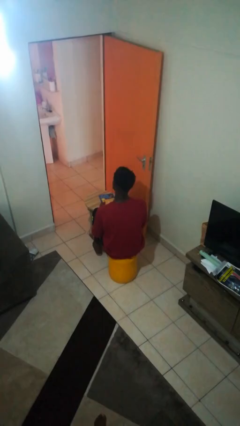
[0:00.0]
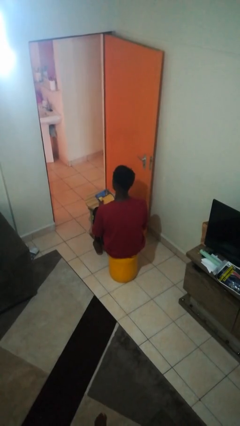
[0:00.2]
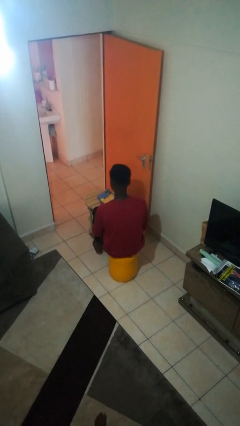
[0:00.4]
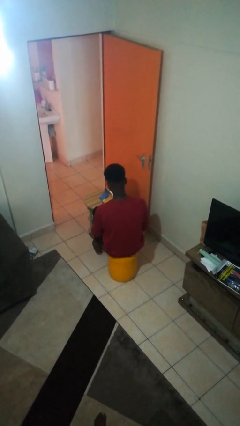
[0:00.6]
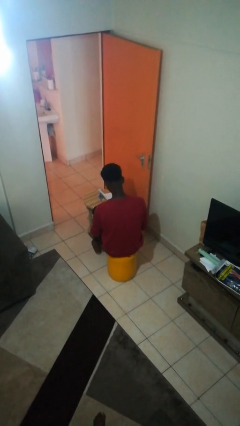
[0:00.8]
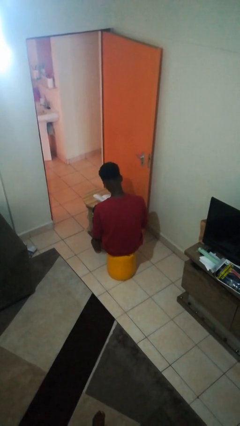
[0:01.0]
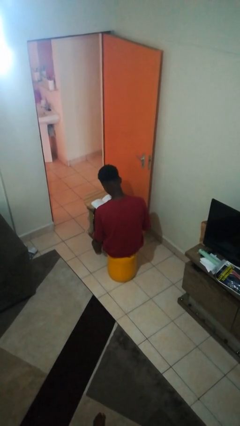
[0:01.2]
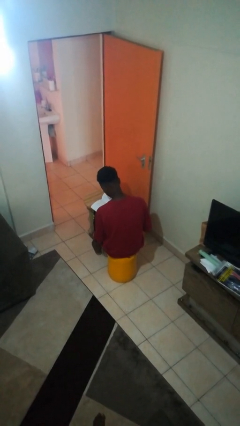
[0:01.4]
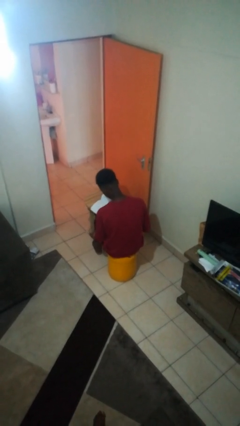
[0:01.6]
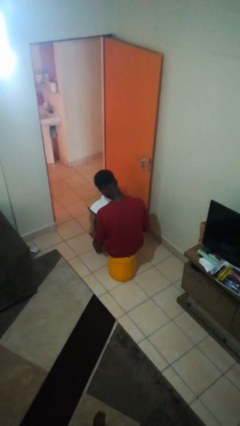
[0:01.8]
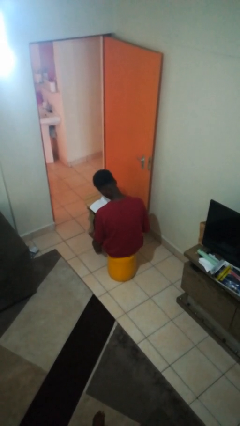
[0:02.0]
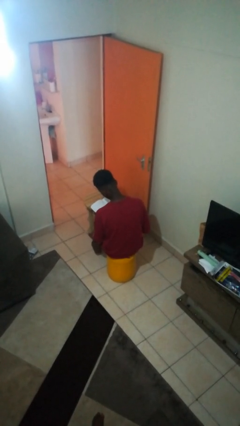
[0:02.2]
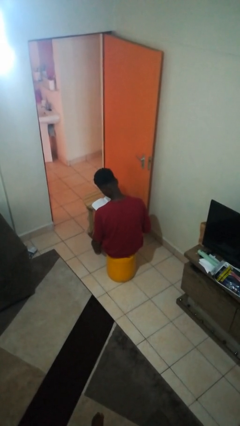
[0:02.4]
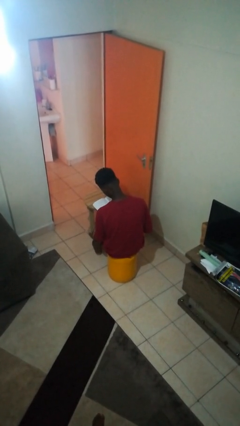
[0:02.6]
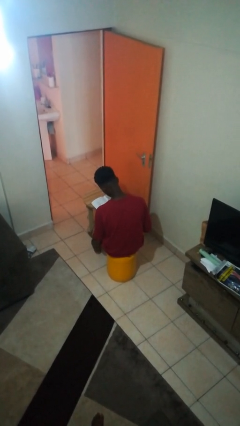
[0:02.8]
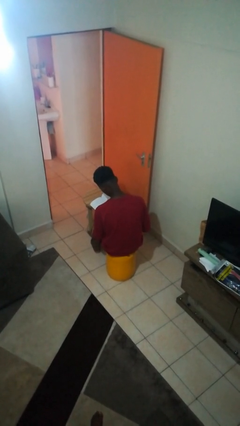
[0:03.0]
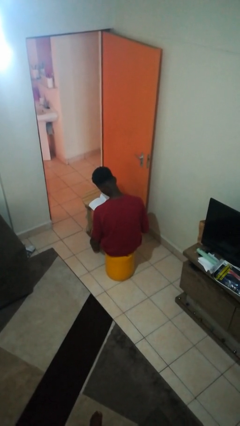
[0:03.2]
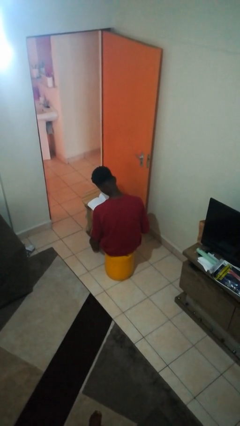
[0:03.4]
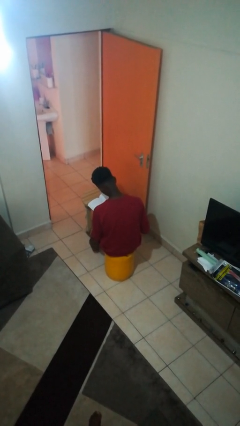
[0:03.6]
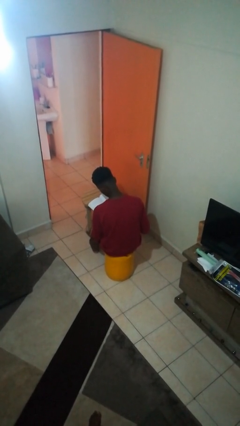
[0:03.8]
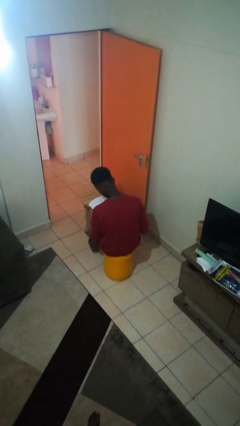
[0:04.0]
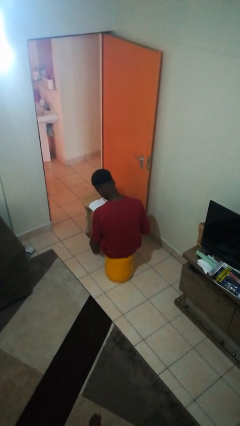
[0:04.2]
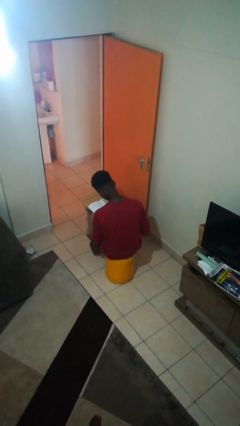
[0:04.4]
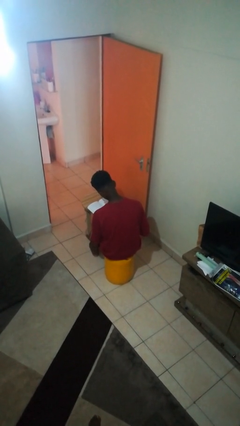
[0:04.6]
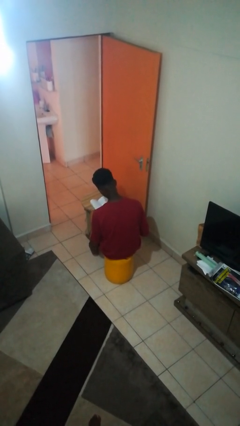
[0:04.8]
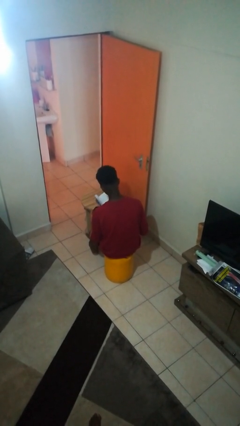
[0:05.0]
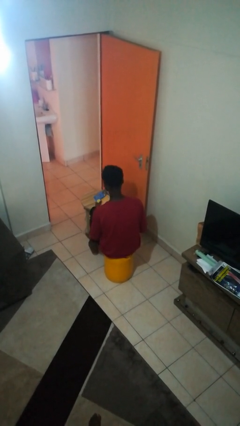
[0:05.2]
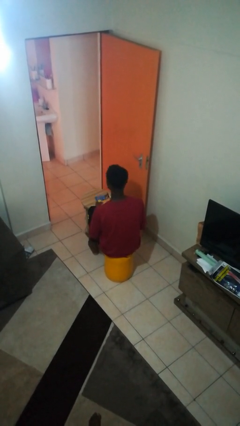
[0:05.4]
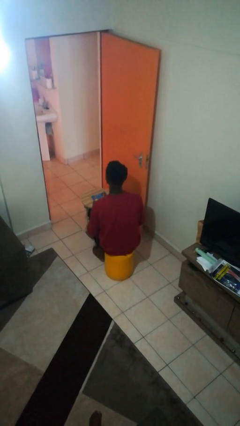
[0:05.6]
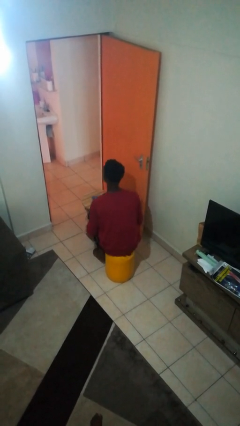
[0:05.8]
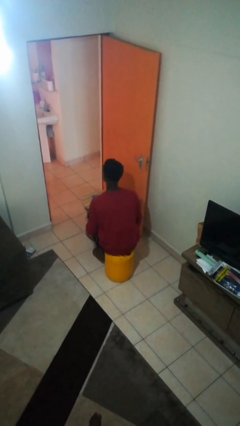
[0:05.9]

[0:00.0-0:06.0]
person reads book

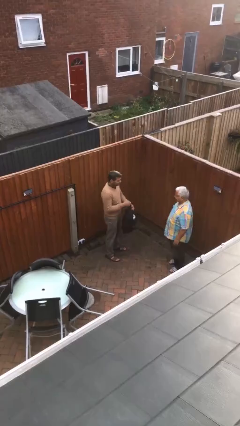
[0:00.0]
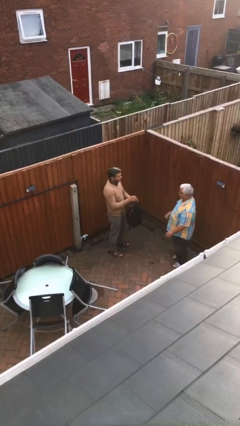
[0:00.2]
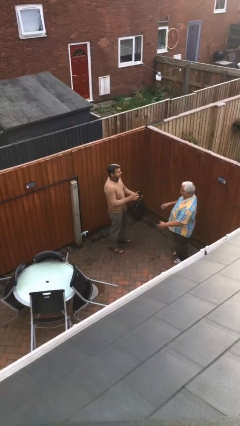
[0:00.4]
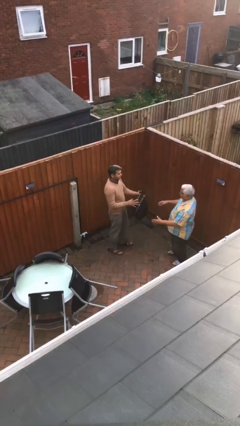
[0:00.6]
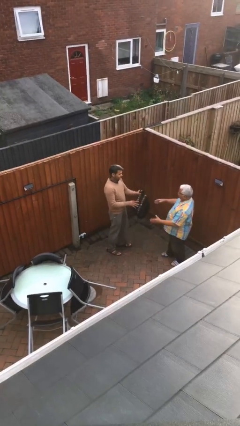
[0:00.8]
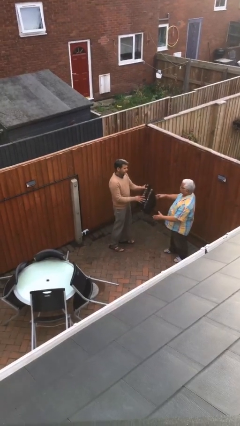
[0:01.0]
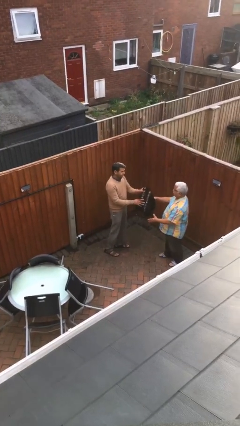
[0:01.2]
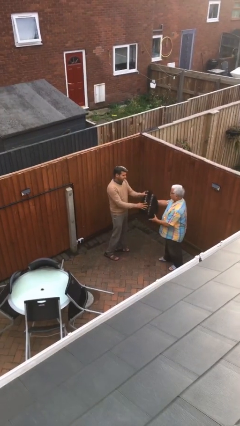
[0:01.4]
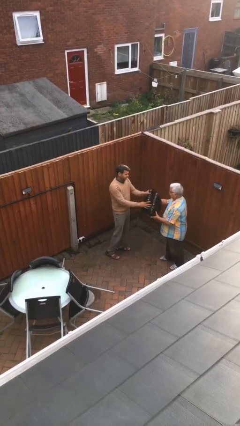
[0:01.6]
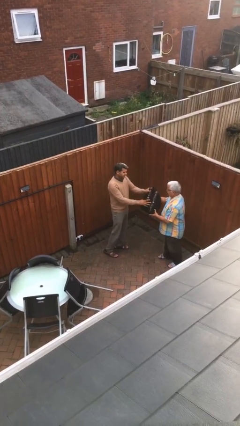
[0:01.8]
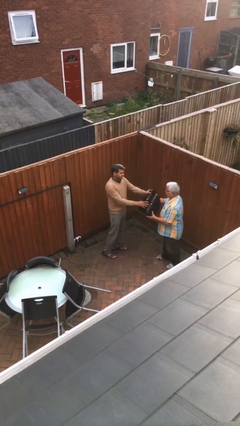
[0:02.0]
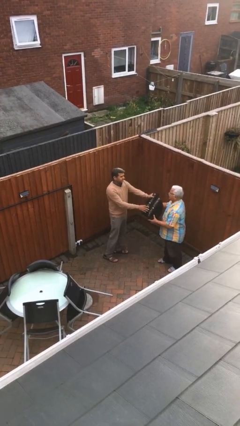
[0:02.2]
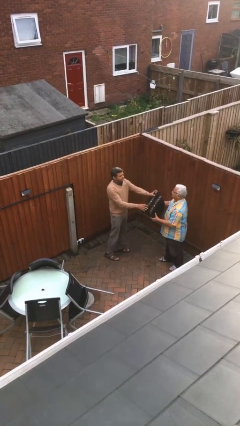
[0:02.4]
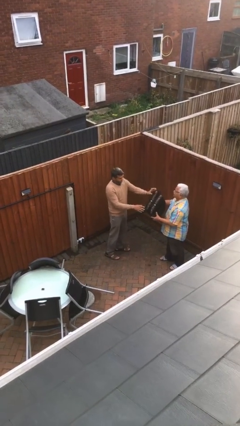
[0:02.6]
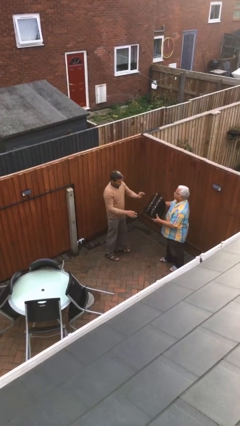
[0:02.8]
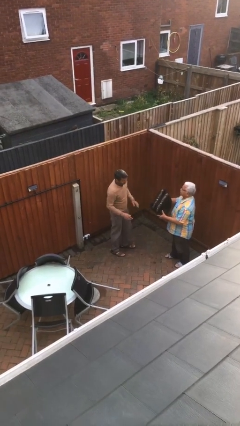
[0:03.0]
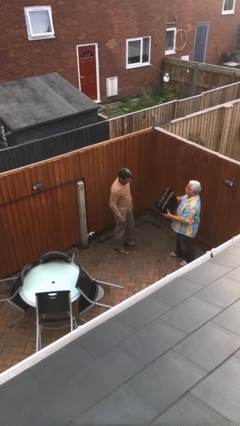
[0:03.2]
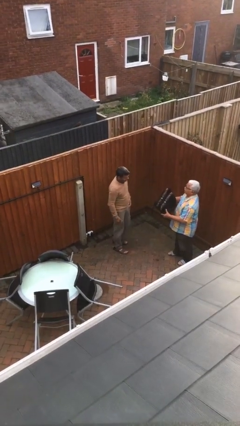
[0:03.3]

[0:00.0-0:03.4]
person transfers object to person

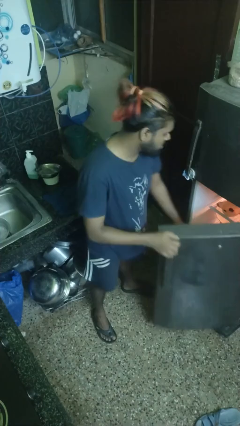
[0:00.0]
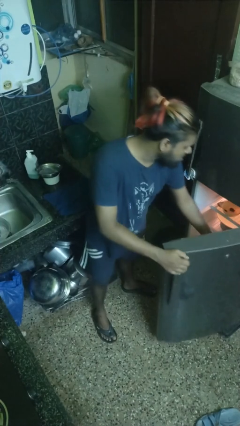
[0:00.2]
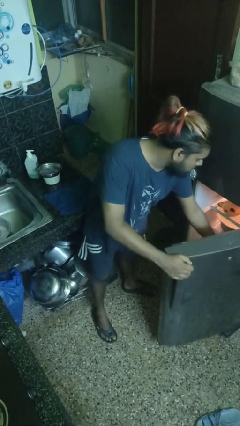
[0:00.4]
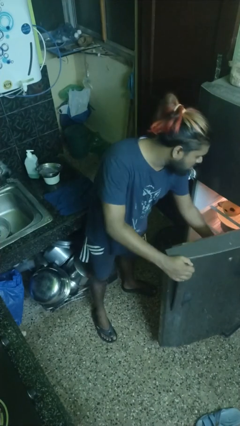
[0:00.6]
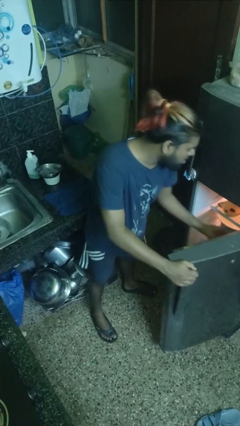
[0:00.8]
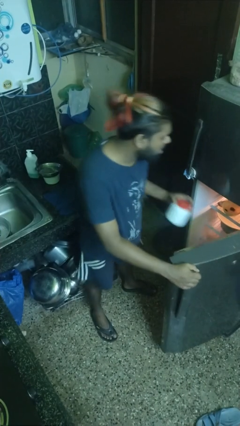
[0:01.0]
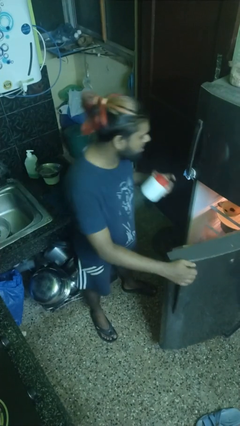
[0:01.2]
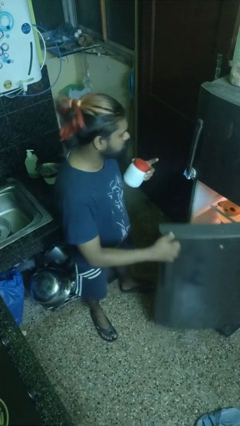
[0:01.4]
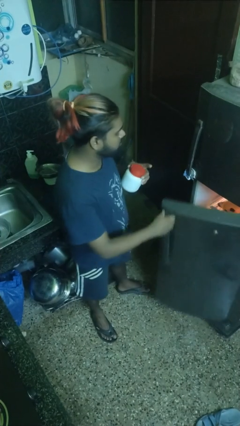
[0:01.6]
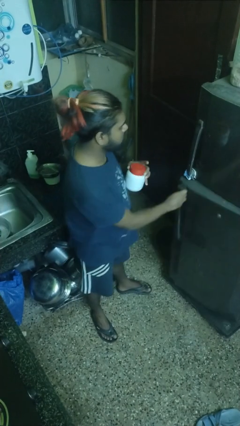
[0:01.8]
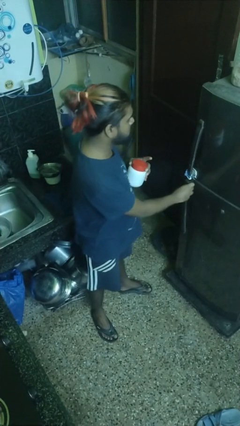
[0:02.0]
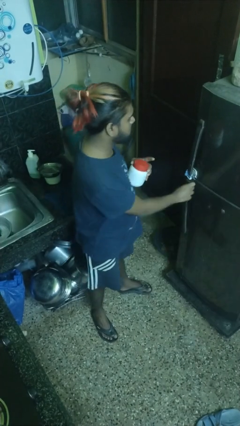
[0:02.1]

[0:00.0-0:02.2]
person takes object from refrigerator

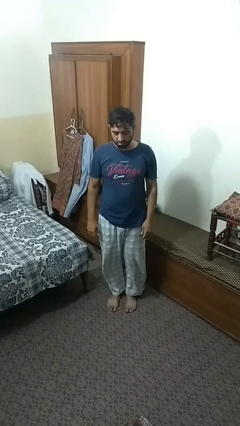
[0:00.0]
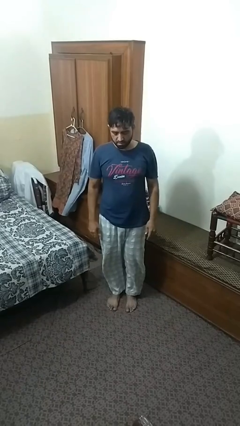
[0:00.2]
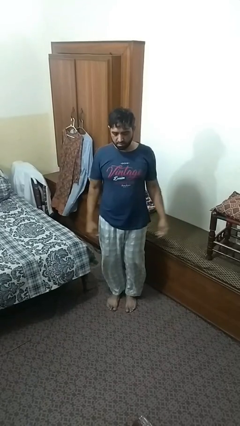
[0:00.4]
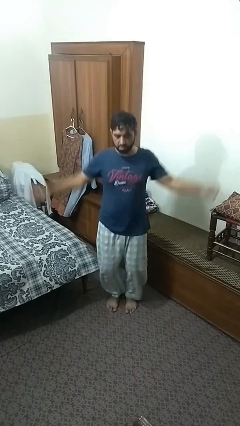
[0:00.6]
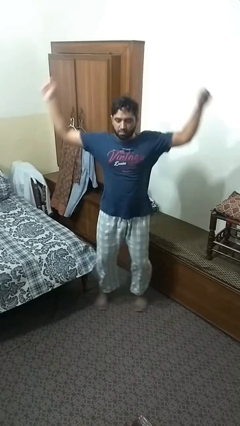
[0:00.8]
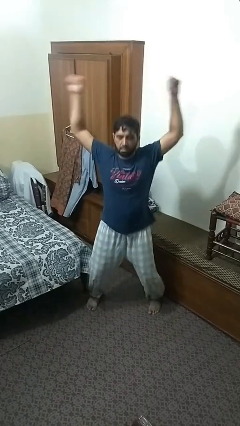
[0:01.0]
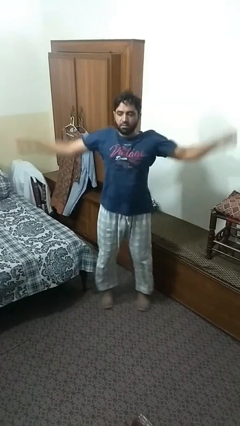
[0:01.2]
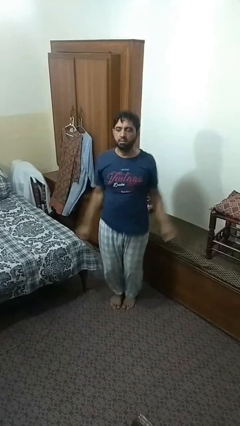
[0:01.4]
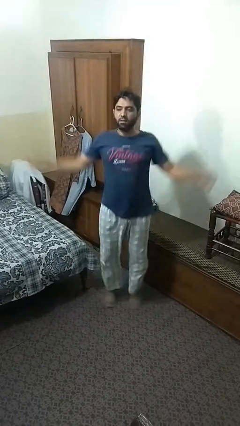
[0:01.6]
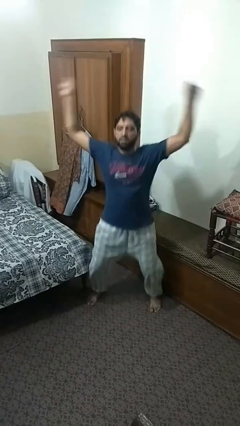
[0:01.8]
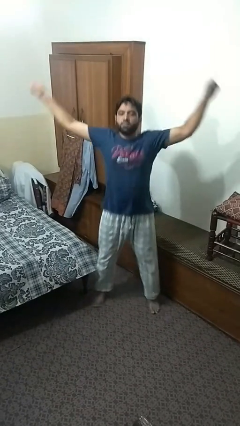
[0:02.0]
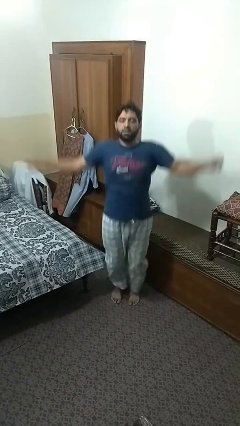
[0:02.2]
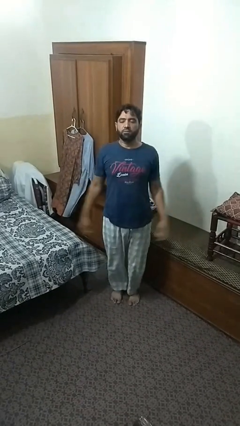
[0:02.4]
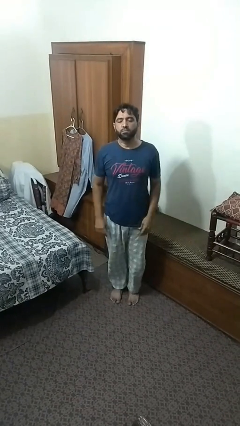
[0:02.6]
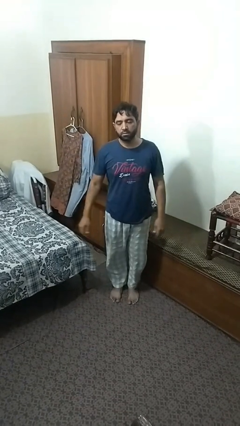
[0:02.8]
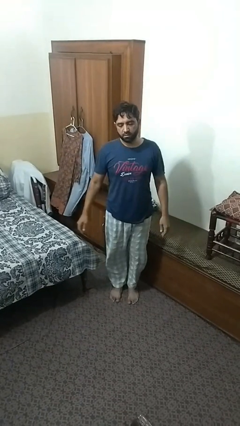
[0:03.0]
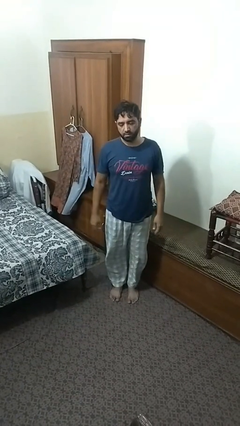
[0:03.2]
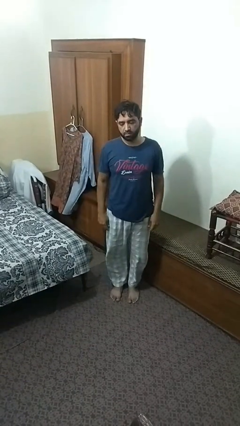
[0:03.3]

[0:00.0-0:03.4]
person exercises with jumping jacks

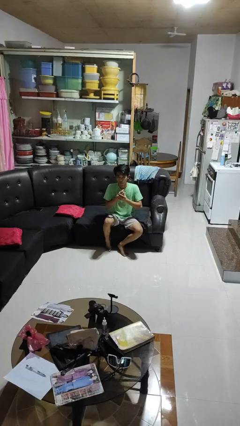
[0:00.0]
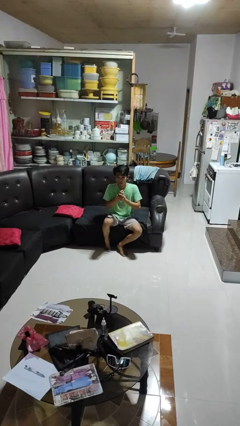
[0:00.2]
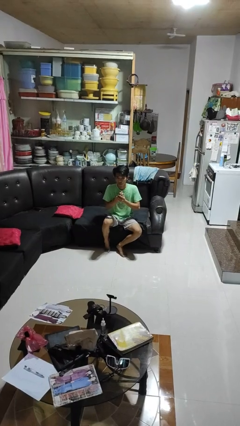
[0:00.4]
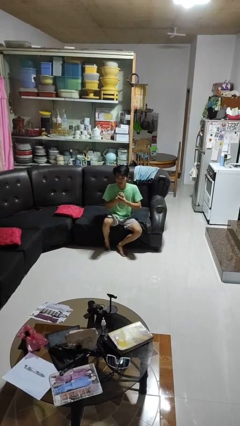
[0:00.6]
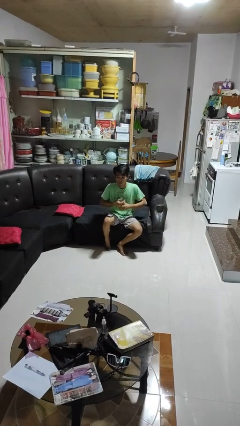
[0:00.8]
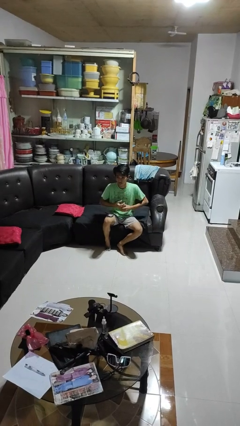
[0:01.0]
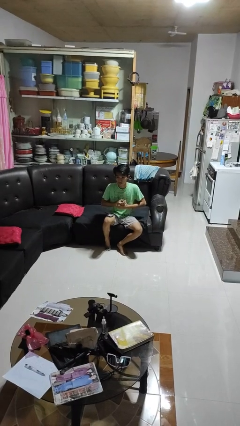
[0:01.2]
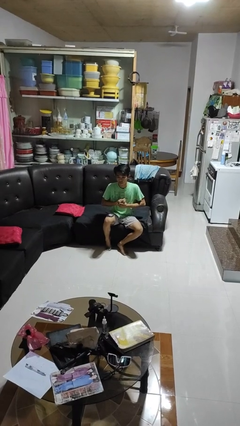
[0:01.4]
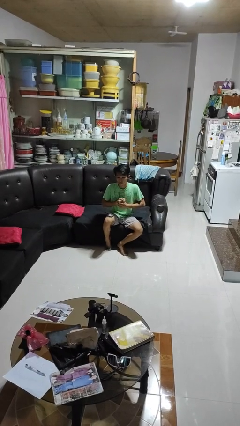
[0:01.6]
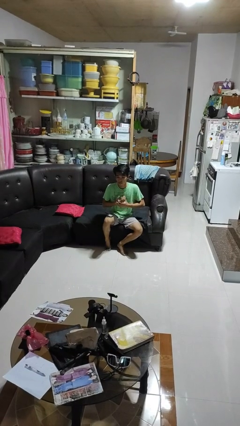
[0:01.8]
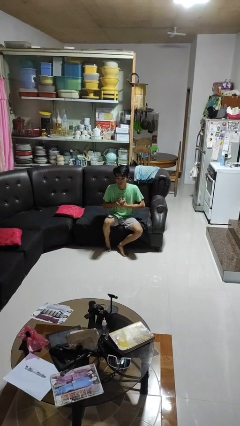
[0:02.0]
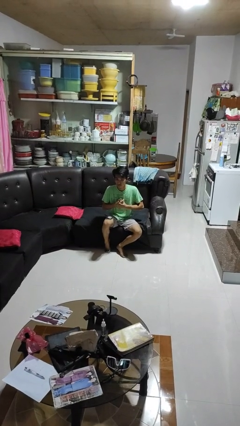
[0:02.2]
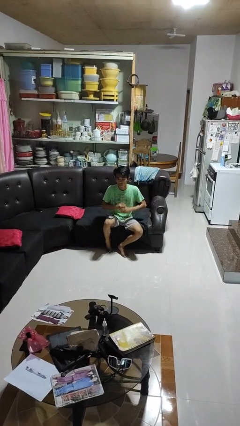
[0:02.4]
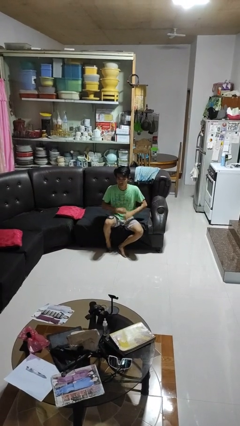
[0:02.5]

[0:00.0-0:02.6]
person cracks knuckles
